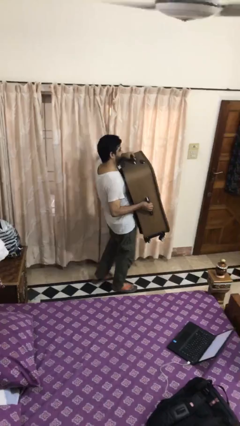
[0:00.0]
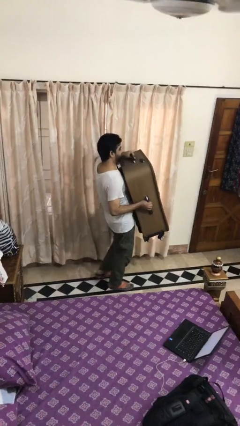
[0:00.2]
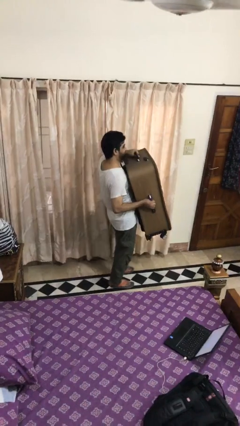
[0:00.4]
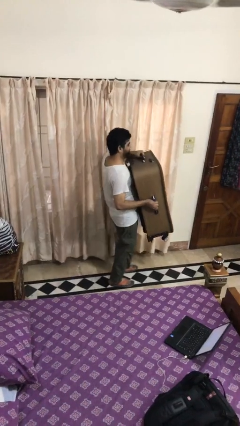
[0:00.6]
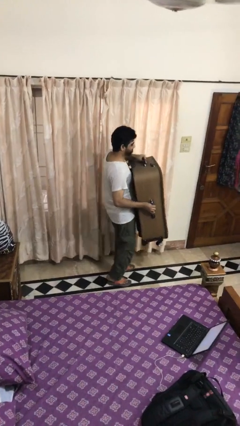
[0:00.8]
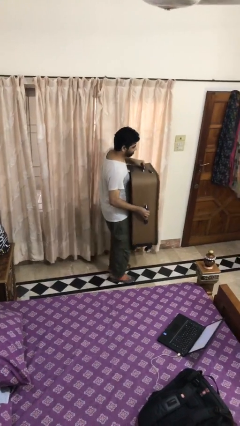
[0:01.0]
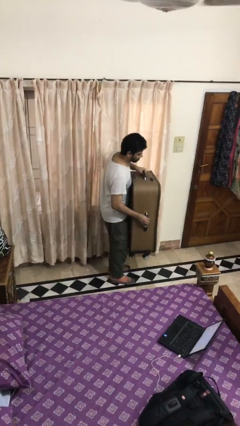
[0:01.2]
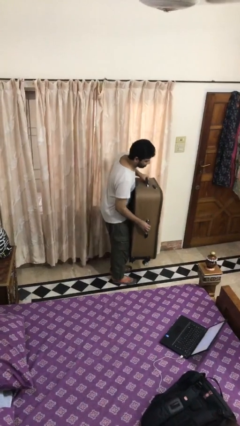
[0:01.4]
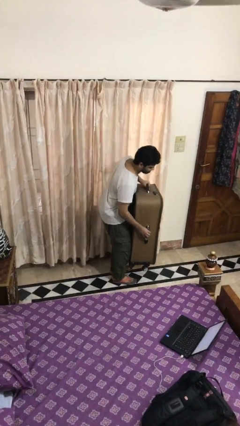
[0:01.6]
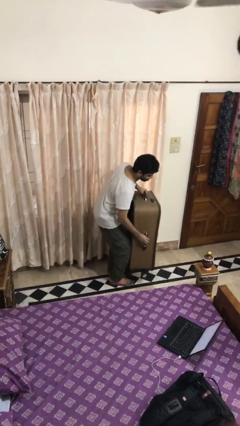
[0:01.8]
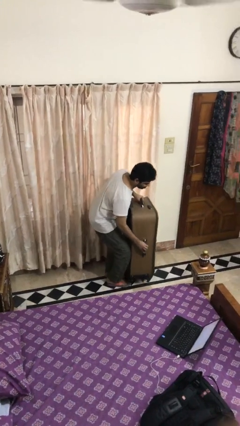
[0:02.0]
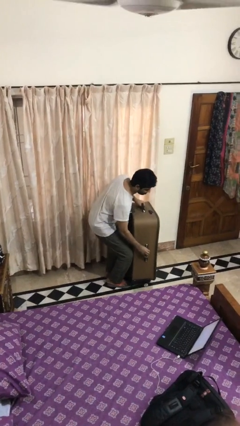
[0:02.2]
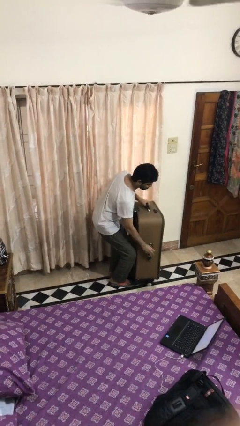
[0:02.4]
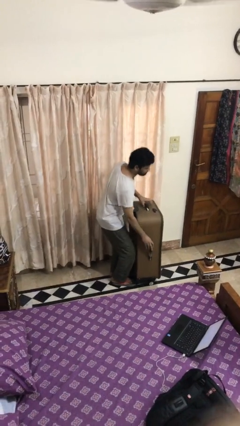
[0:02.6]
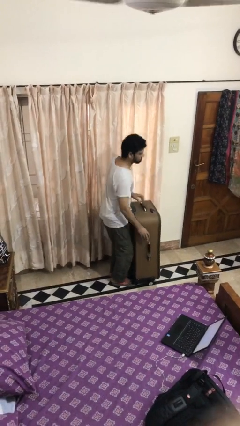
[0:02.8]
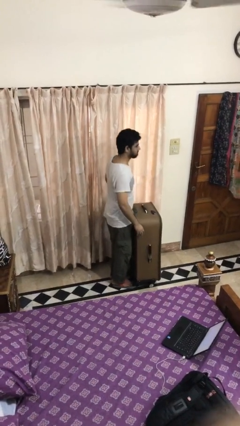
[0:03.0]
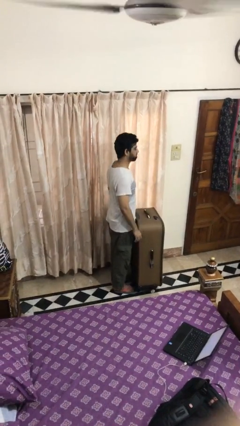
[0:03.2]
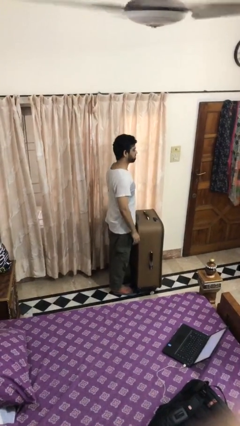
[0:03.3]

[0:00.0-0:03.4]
person puts down object on floor

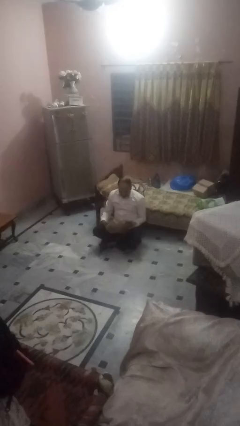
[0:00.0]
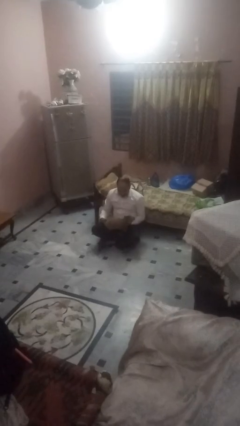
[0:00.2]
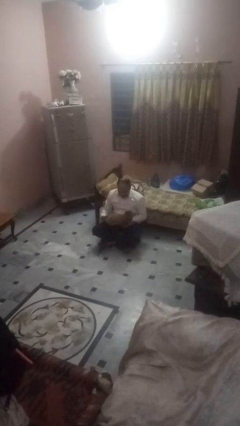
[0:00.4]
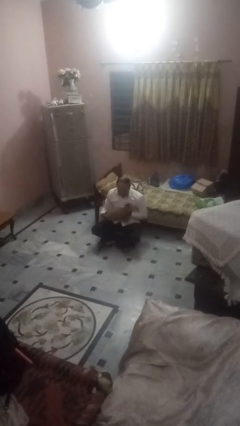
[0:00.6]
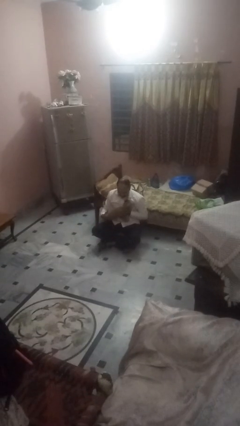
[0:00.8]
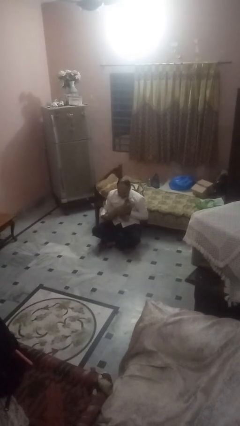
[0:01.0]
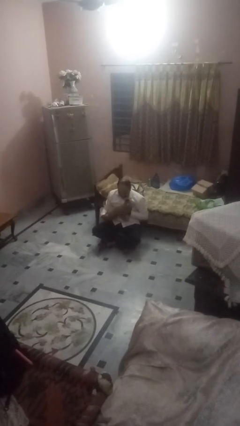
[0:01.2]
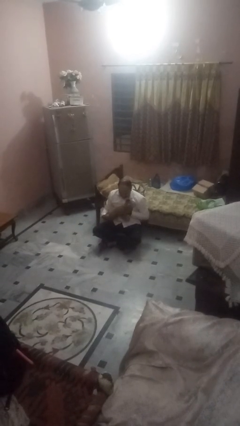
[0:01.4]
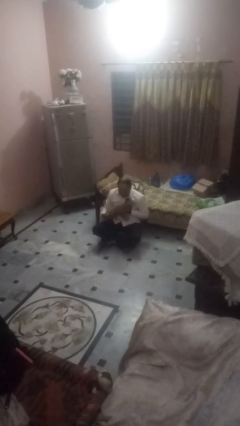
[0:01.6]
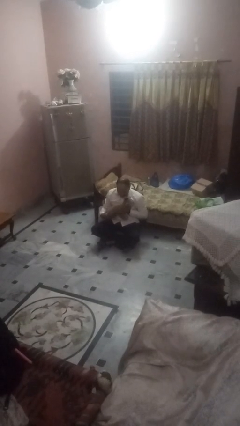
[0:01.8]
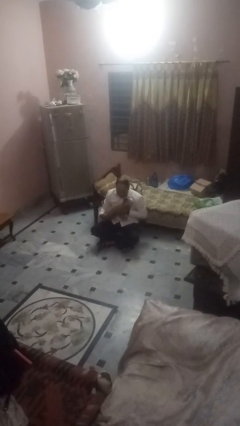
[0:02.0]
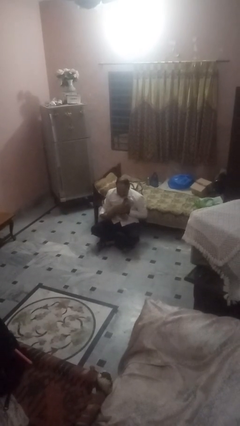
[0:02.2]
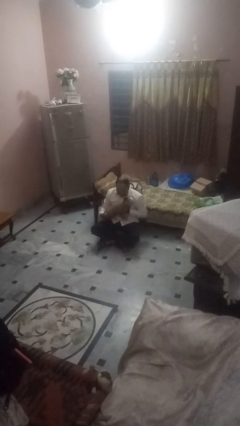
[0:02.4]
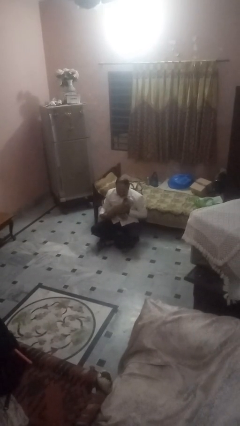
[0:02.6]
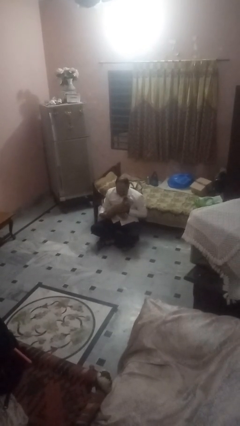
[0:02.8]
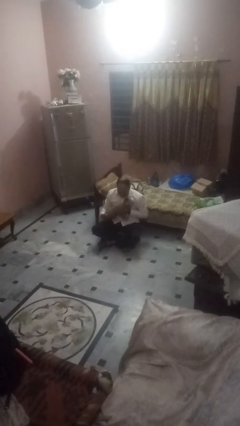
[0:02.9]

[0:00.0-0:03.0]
person hugs dog

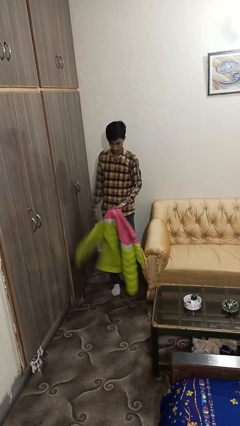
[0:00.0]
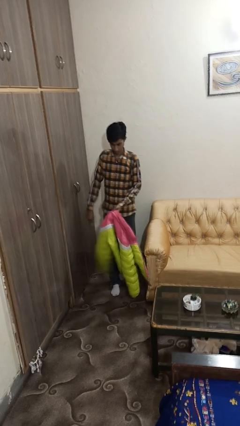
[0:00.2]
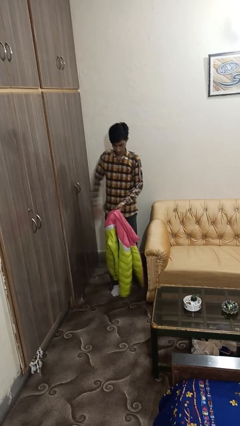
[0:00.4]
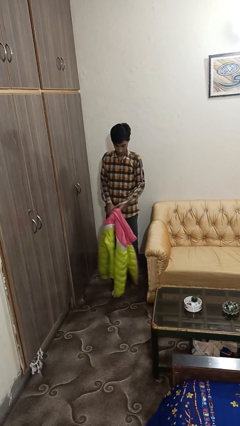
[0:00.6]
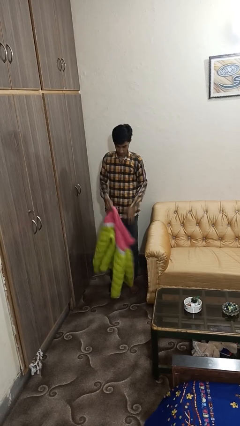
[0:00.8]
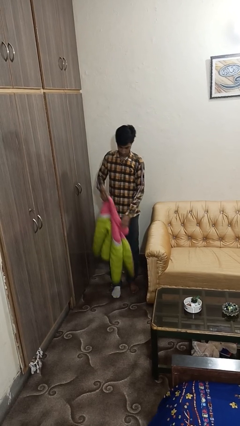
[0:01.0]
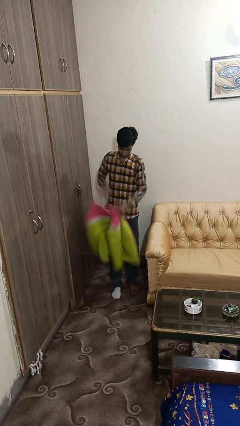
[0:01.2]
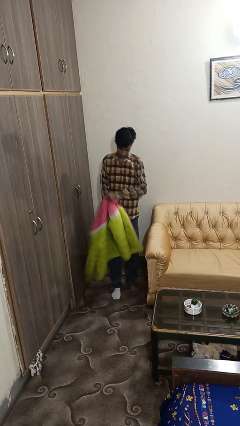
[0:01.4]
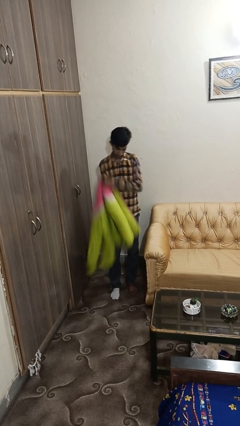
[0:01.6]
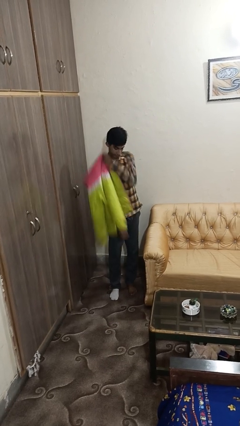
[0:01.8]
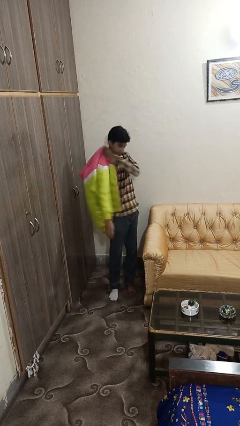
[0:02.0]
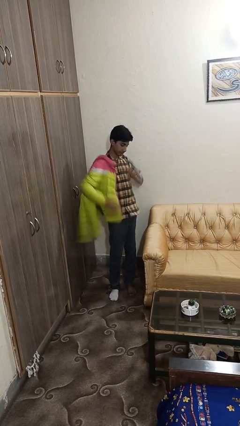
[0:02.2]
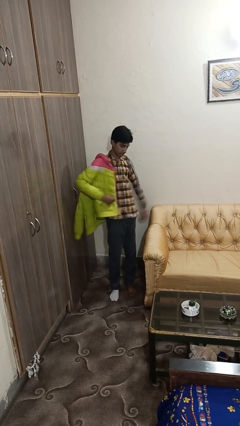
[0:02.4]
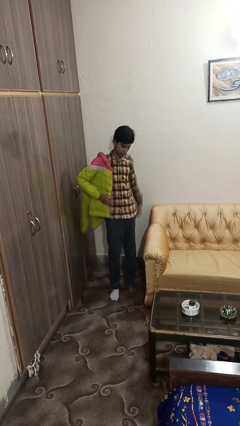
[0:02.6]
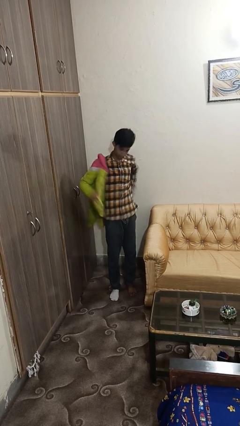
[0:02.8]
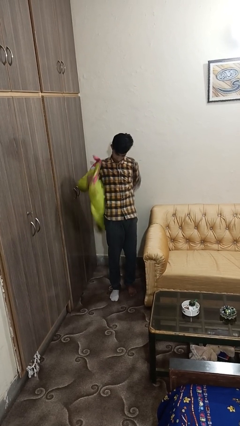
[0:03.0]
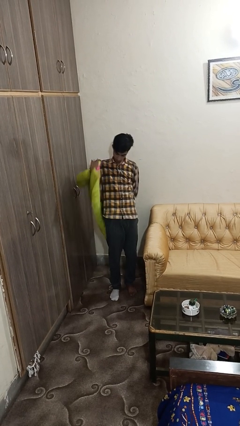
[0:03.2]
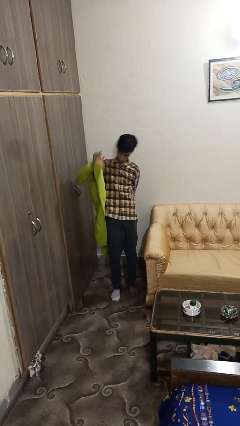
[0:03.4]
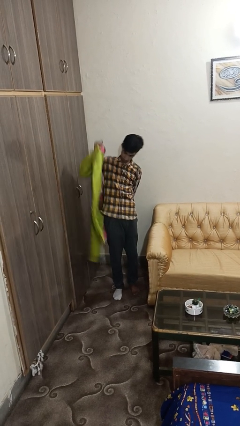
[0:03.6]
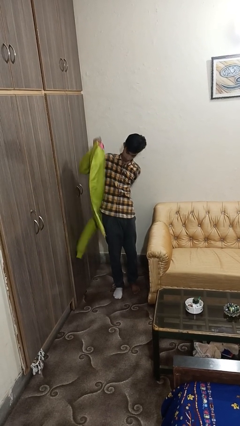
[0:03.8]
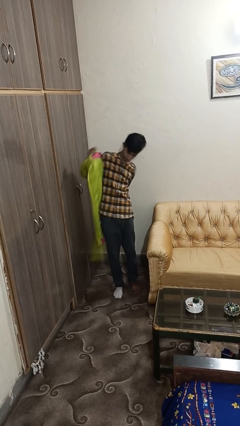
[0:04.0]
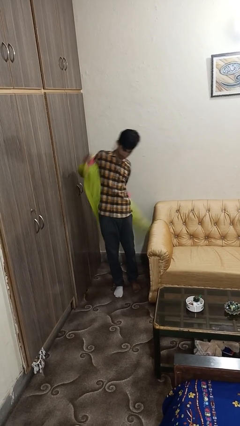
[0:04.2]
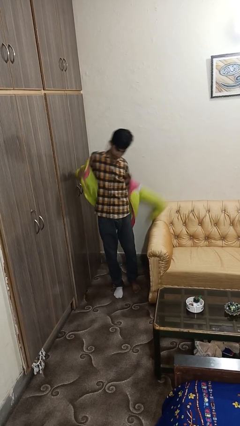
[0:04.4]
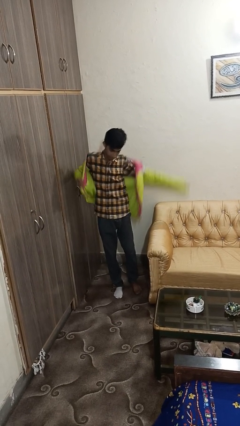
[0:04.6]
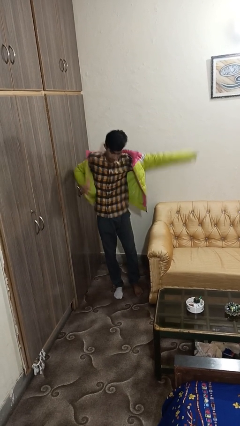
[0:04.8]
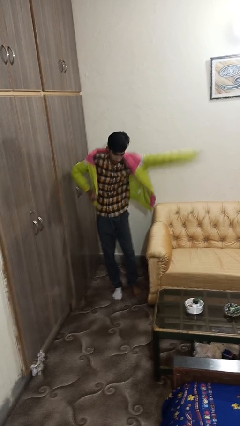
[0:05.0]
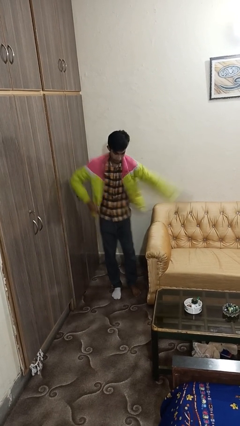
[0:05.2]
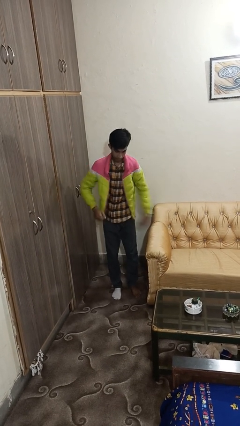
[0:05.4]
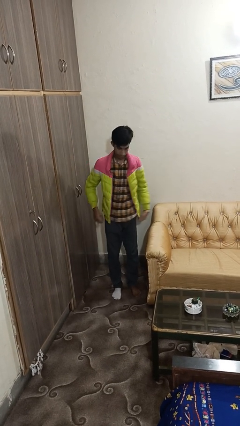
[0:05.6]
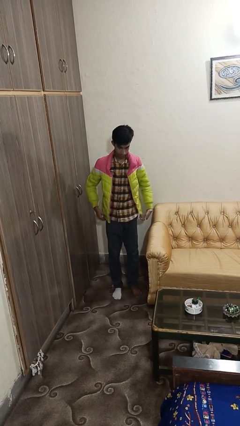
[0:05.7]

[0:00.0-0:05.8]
person puts on jacket

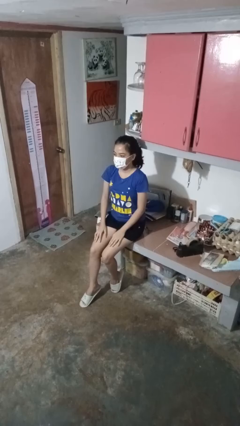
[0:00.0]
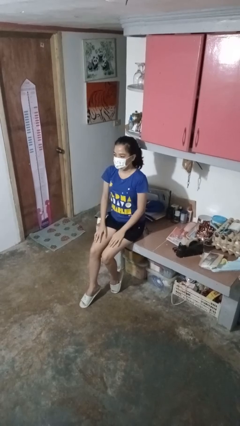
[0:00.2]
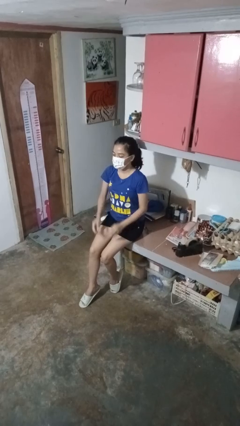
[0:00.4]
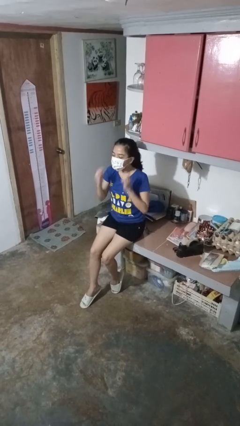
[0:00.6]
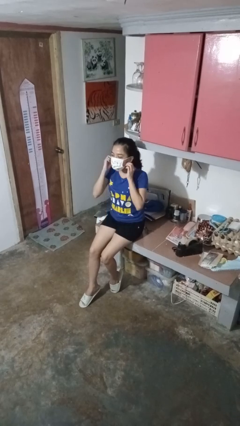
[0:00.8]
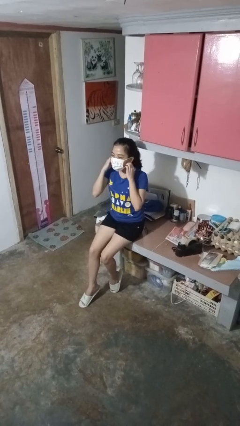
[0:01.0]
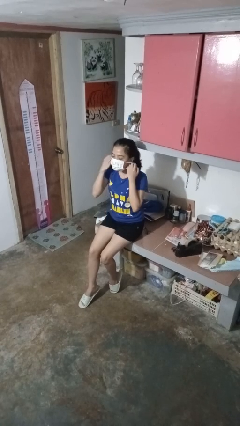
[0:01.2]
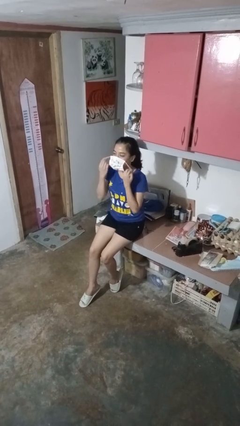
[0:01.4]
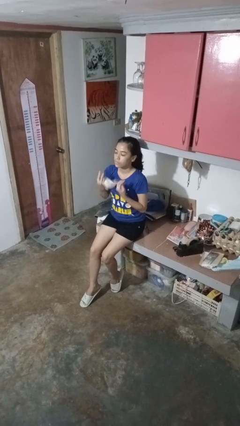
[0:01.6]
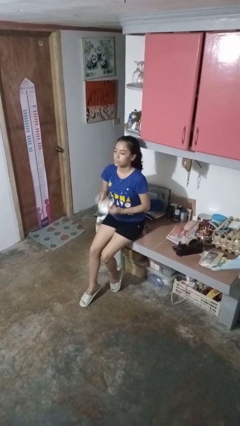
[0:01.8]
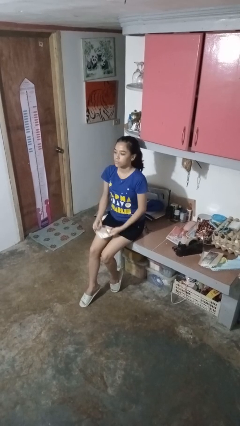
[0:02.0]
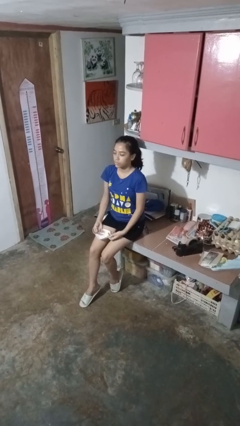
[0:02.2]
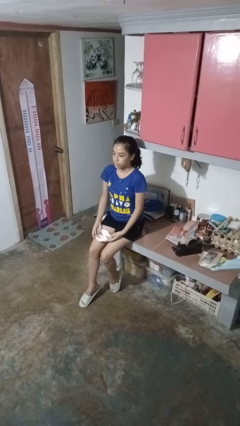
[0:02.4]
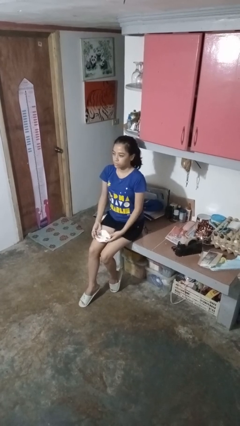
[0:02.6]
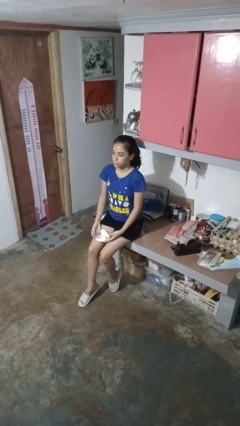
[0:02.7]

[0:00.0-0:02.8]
person takes off facemask

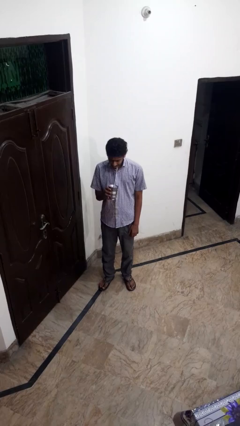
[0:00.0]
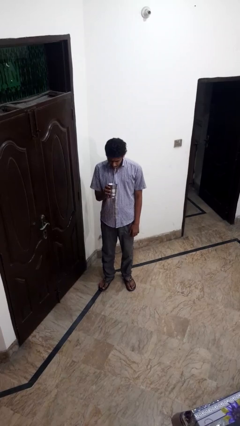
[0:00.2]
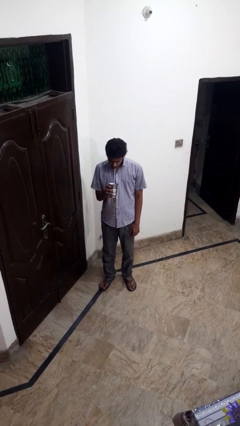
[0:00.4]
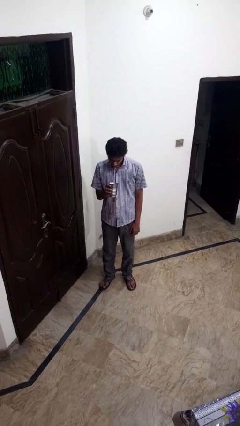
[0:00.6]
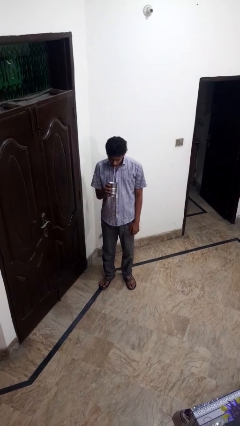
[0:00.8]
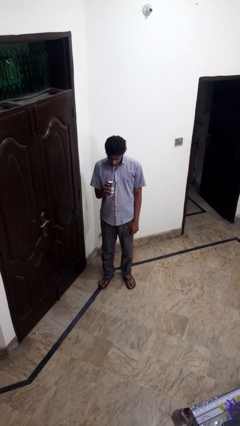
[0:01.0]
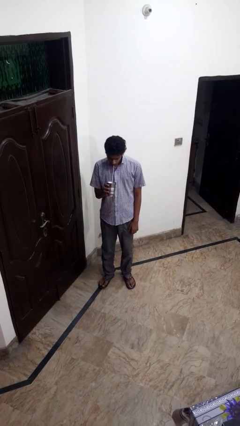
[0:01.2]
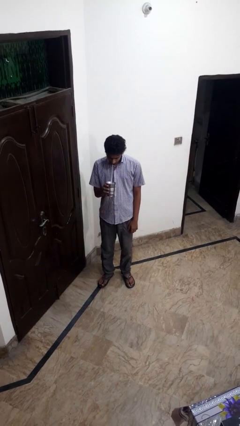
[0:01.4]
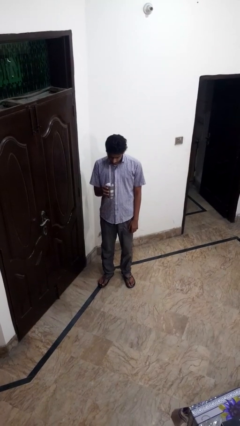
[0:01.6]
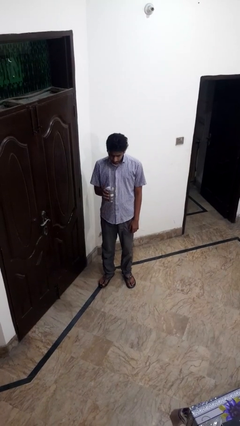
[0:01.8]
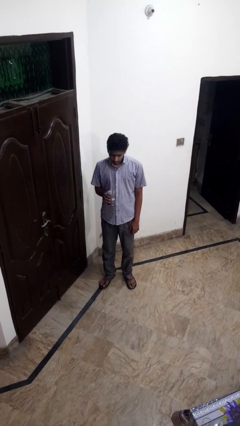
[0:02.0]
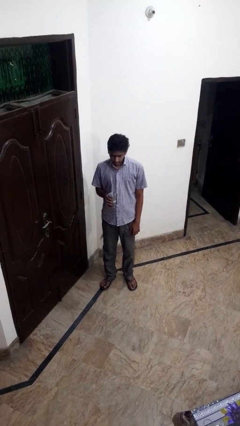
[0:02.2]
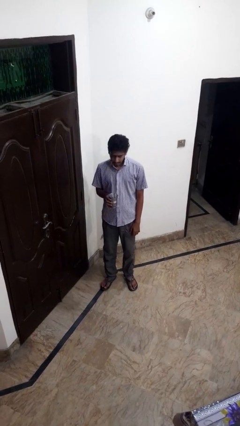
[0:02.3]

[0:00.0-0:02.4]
person drinks from straw

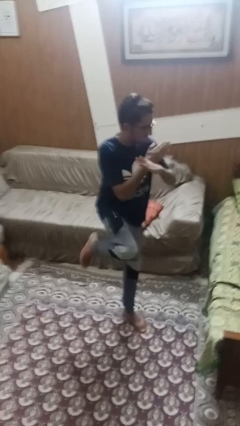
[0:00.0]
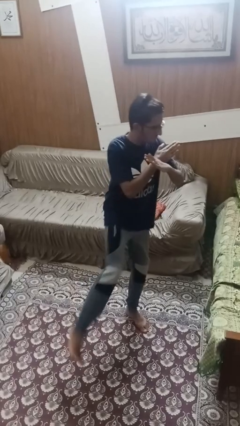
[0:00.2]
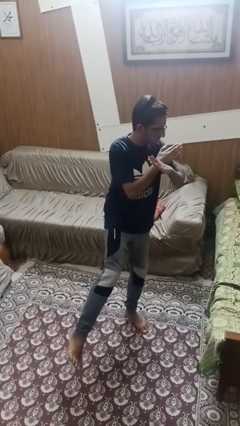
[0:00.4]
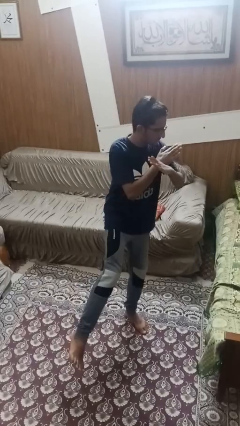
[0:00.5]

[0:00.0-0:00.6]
person karate kicks
